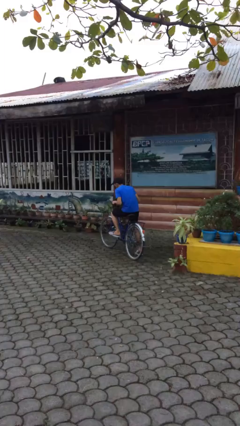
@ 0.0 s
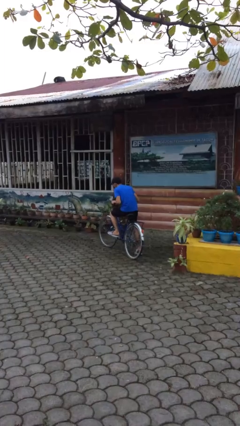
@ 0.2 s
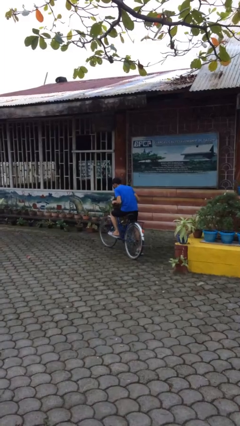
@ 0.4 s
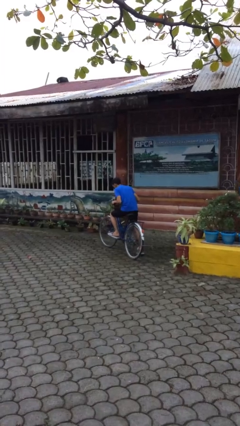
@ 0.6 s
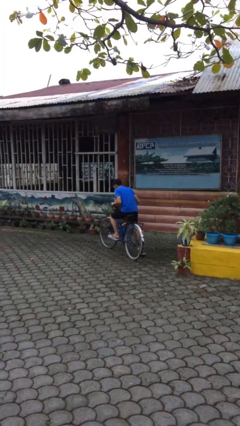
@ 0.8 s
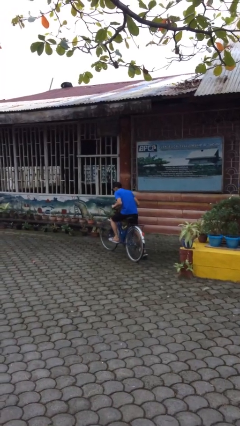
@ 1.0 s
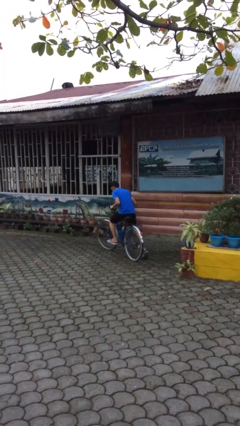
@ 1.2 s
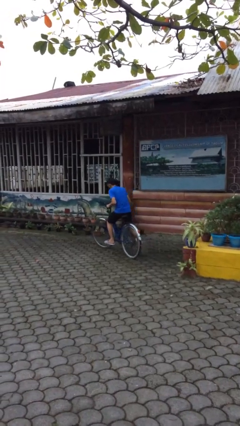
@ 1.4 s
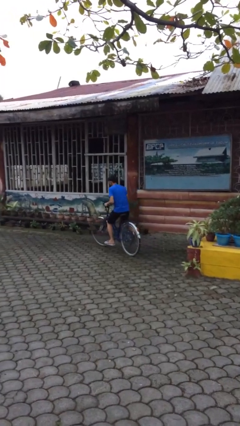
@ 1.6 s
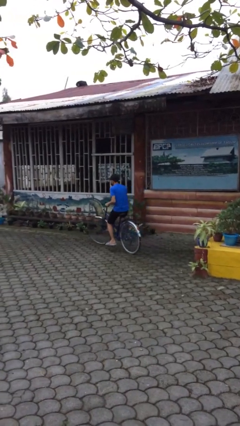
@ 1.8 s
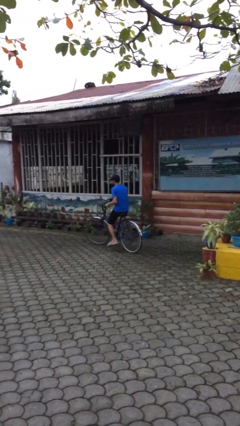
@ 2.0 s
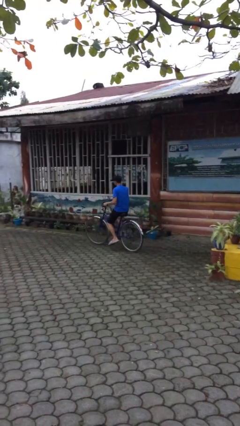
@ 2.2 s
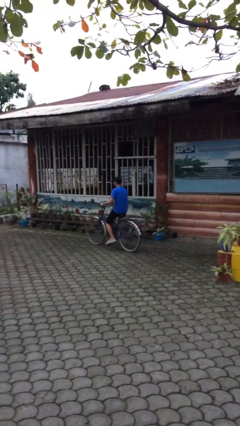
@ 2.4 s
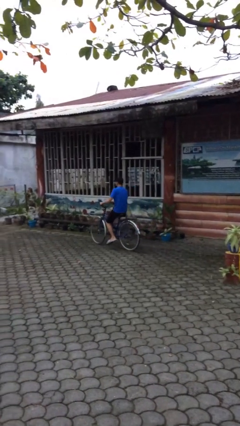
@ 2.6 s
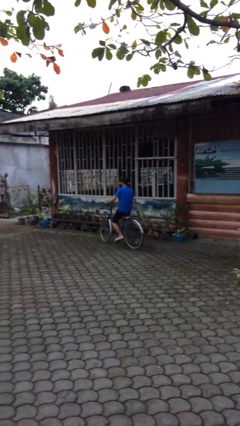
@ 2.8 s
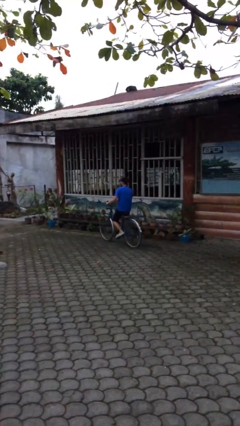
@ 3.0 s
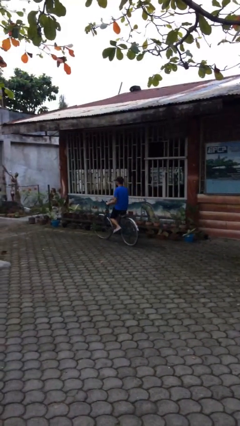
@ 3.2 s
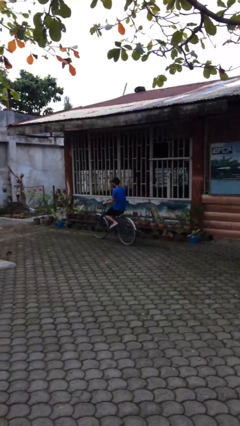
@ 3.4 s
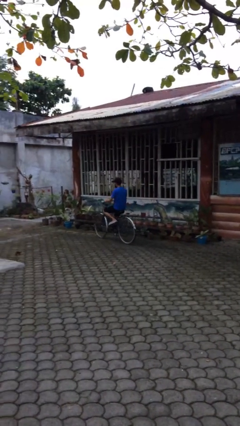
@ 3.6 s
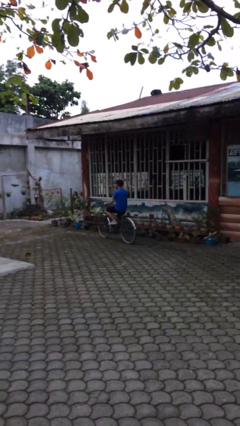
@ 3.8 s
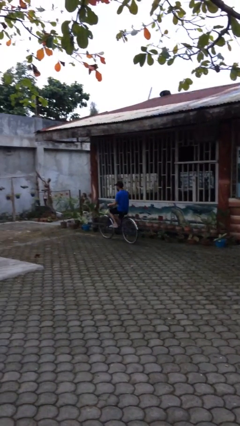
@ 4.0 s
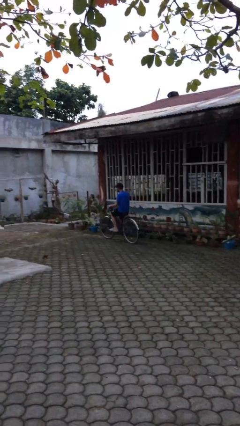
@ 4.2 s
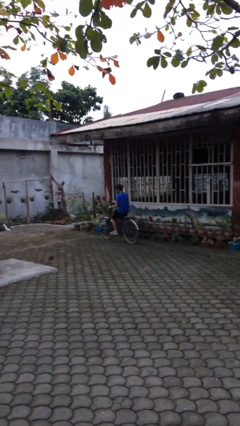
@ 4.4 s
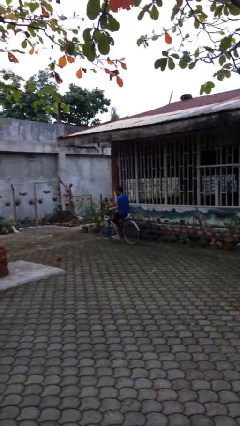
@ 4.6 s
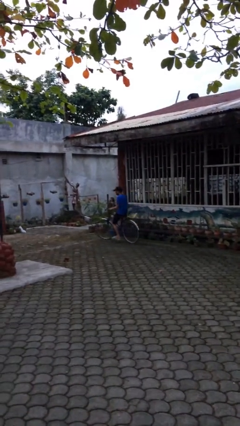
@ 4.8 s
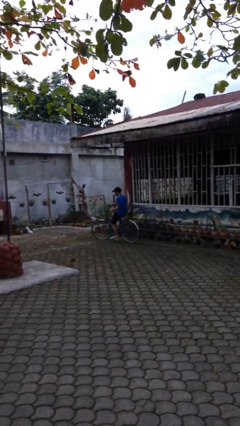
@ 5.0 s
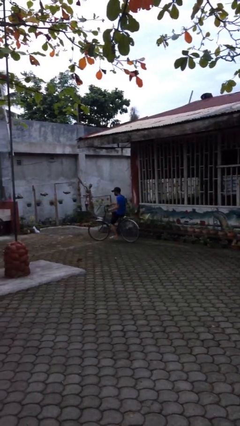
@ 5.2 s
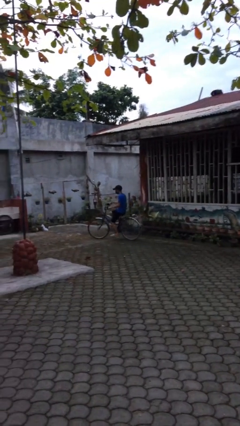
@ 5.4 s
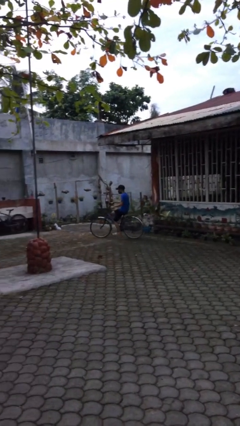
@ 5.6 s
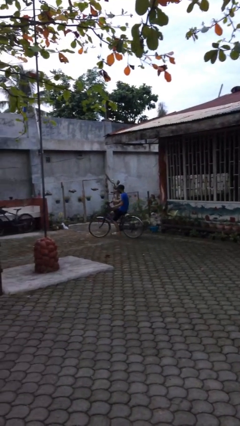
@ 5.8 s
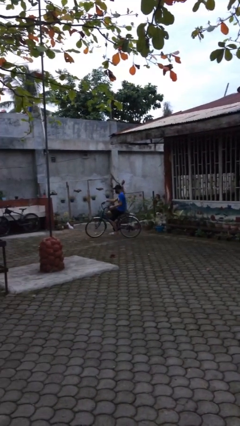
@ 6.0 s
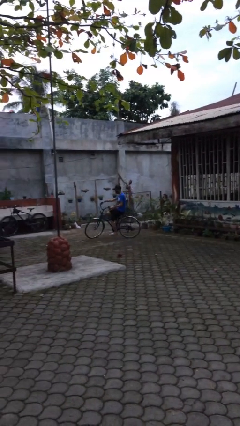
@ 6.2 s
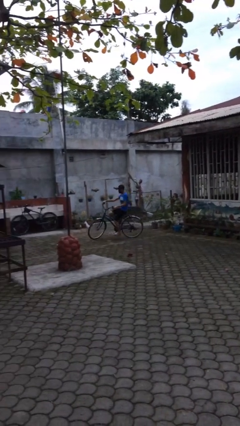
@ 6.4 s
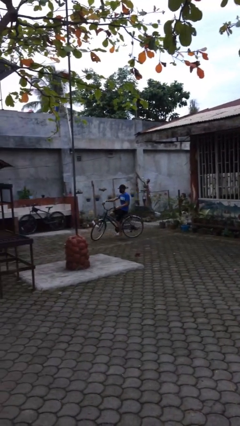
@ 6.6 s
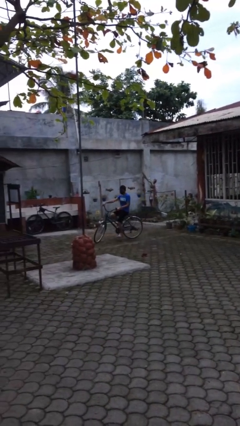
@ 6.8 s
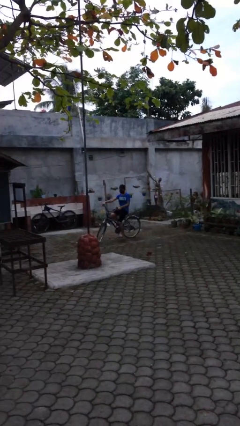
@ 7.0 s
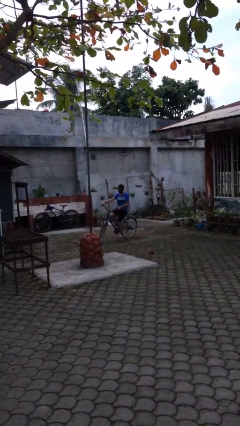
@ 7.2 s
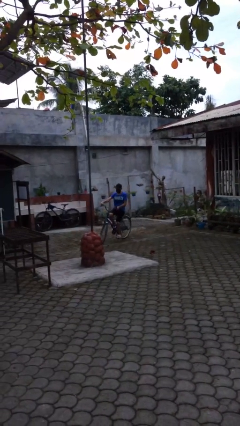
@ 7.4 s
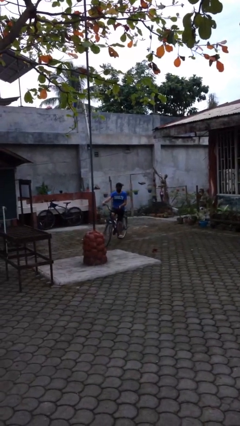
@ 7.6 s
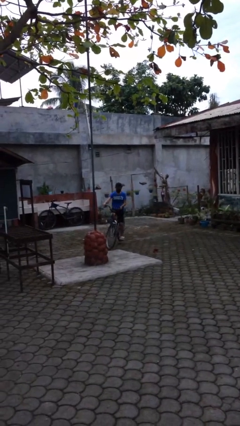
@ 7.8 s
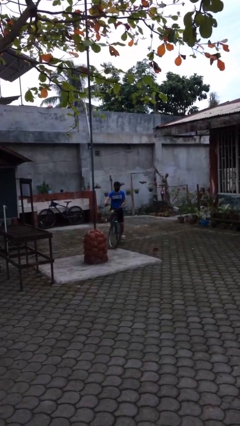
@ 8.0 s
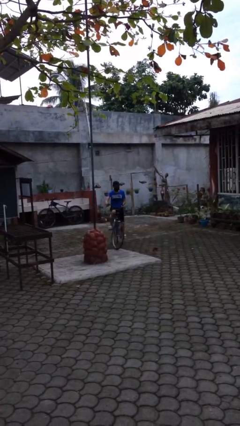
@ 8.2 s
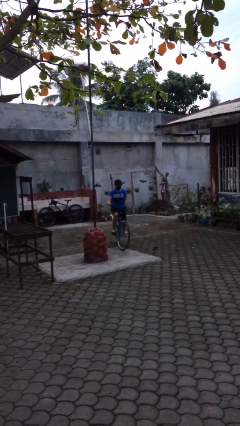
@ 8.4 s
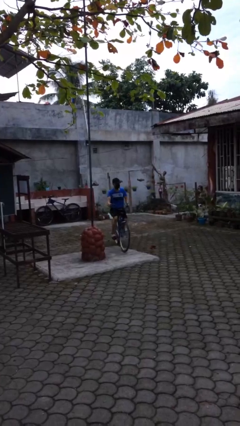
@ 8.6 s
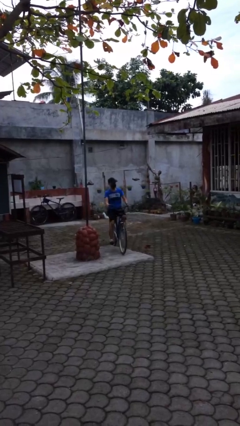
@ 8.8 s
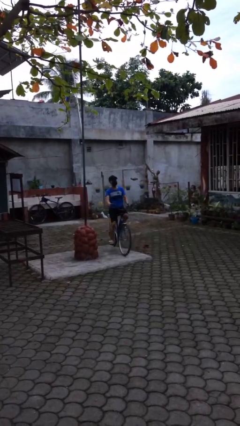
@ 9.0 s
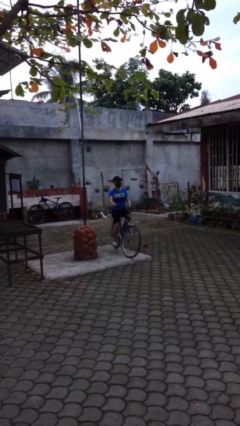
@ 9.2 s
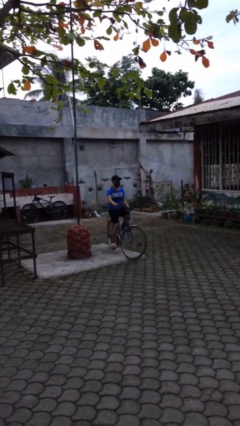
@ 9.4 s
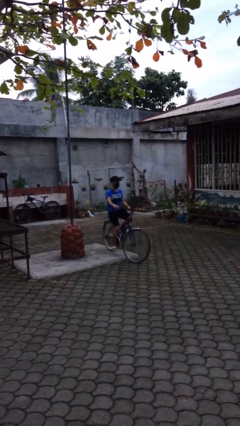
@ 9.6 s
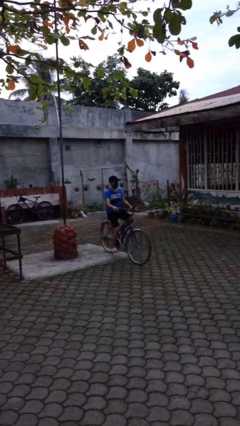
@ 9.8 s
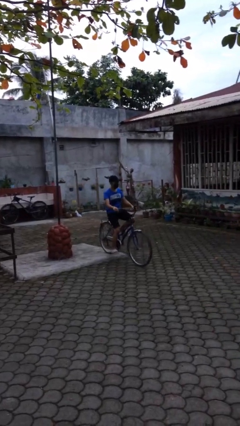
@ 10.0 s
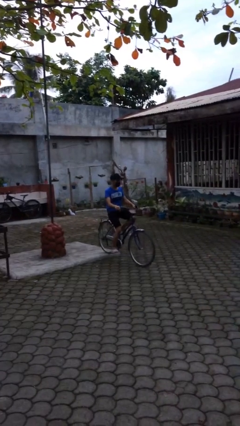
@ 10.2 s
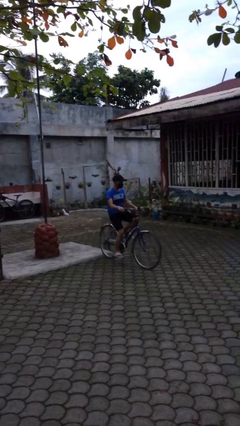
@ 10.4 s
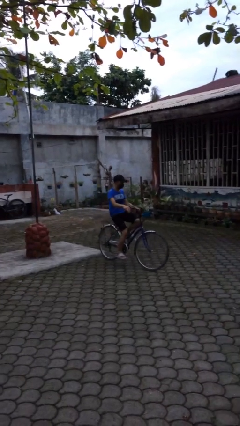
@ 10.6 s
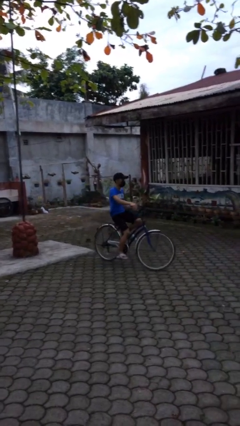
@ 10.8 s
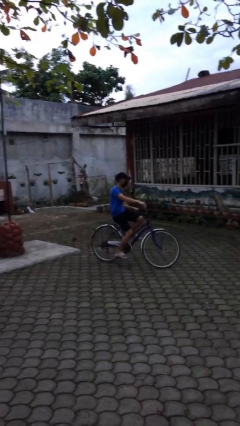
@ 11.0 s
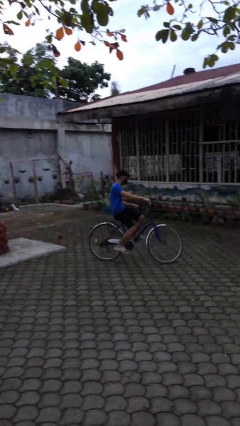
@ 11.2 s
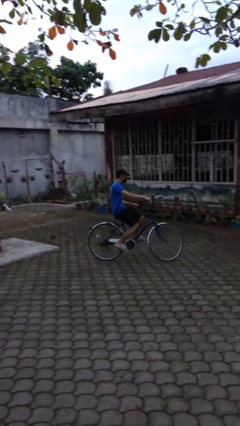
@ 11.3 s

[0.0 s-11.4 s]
person rides bicycle

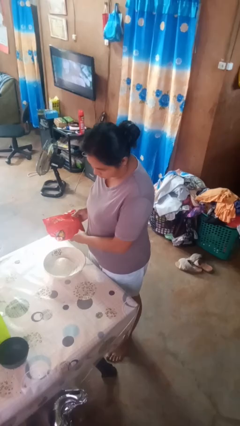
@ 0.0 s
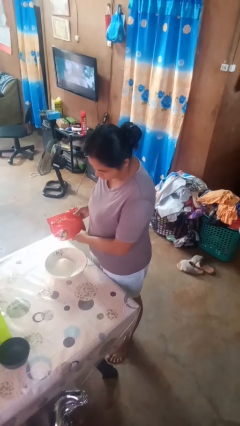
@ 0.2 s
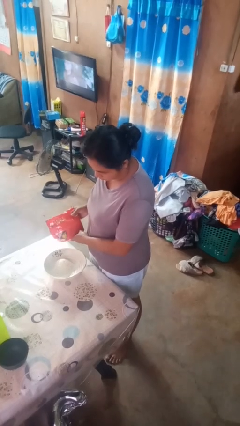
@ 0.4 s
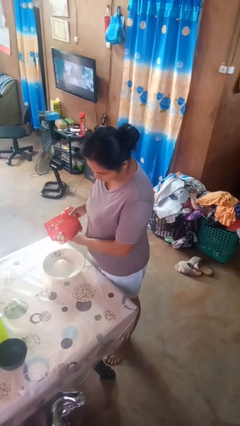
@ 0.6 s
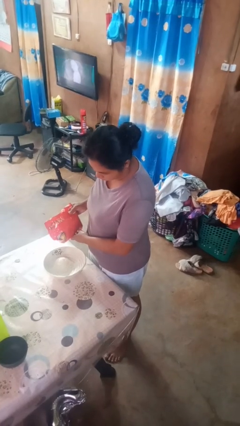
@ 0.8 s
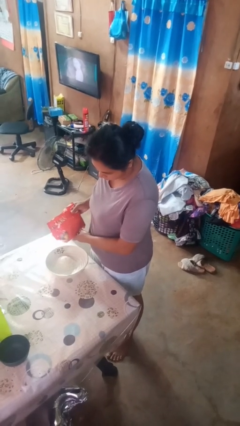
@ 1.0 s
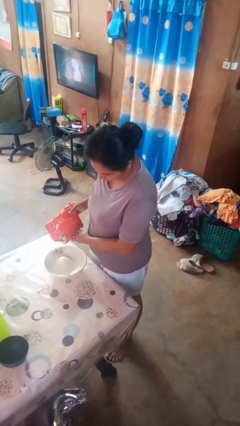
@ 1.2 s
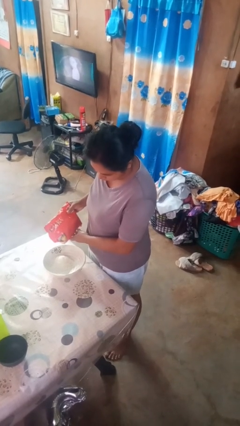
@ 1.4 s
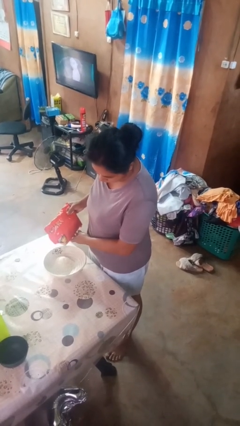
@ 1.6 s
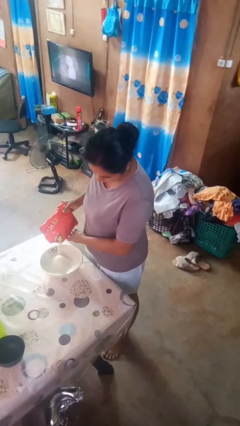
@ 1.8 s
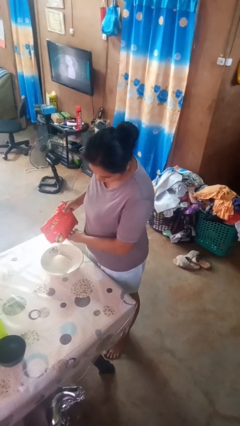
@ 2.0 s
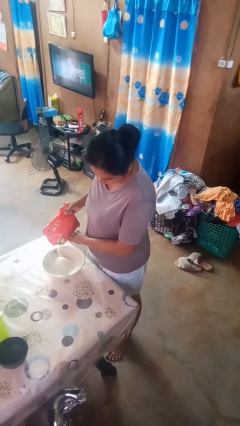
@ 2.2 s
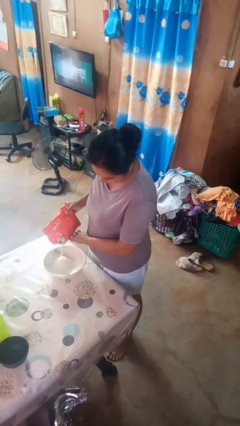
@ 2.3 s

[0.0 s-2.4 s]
person pours into bowl

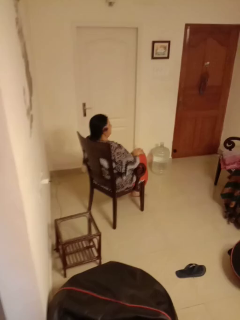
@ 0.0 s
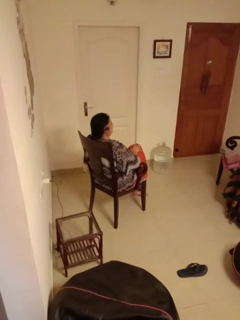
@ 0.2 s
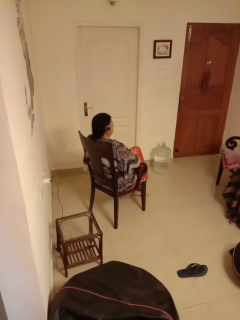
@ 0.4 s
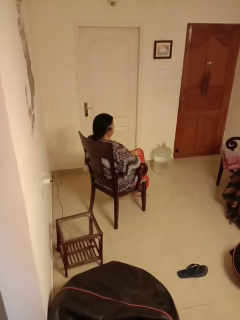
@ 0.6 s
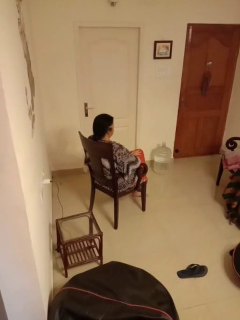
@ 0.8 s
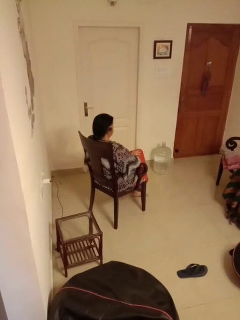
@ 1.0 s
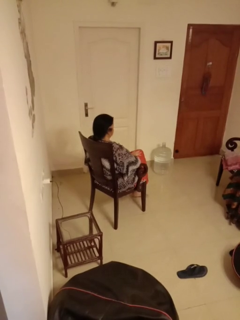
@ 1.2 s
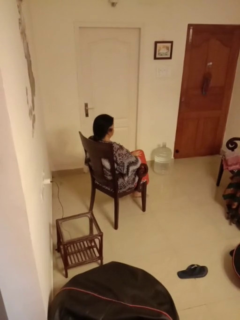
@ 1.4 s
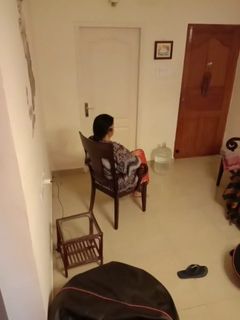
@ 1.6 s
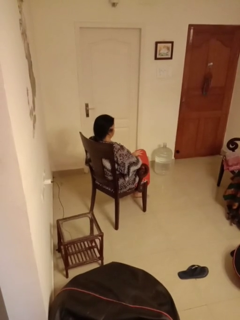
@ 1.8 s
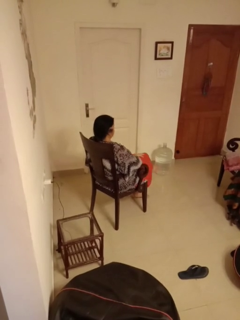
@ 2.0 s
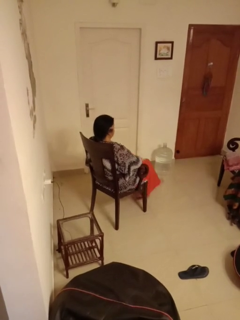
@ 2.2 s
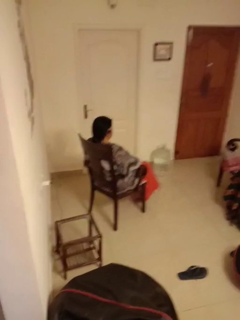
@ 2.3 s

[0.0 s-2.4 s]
person crosses legs

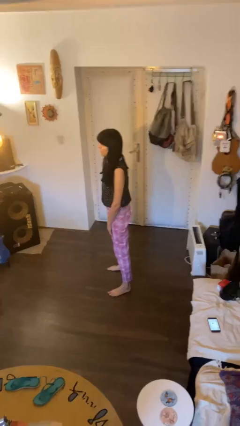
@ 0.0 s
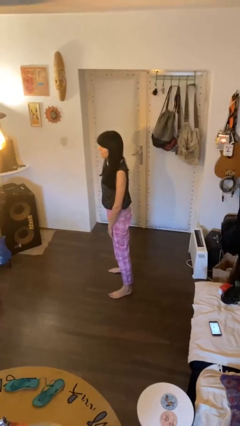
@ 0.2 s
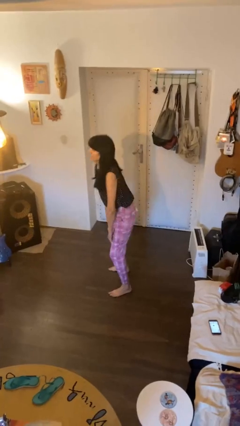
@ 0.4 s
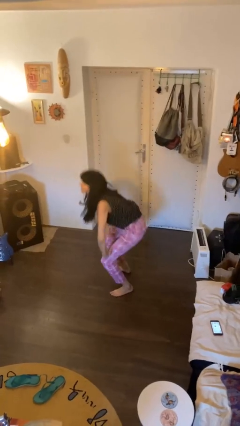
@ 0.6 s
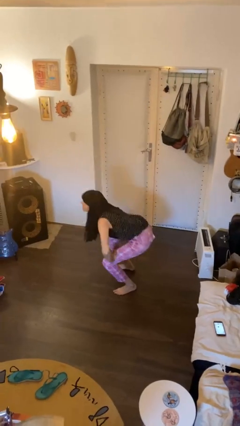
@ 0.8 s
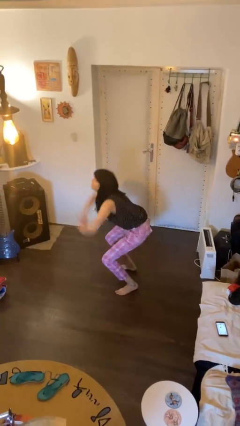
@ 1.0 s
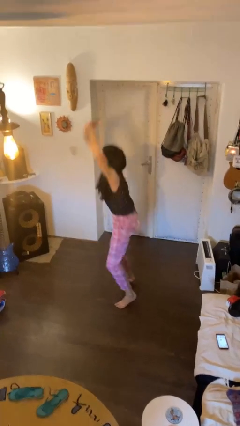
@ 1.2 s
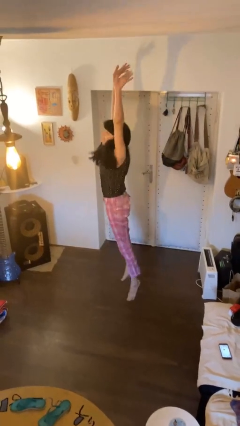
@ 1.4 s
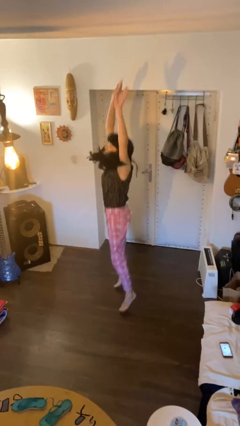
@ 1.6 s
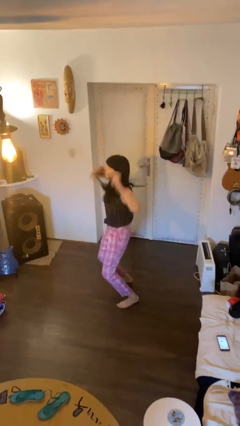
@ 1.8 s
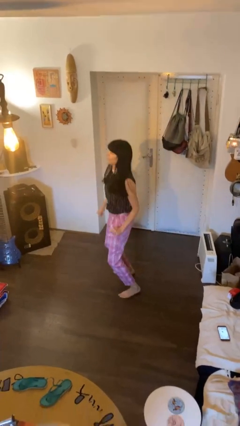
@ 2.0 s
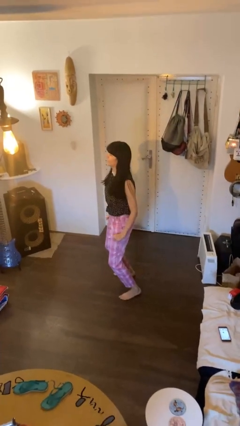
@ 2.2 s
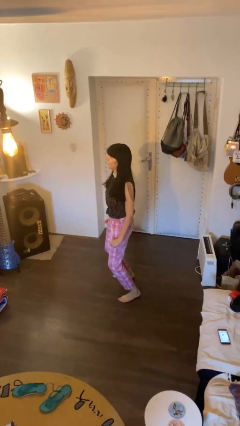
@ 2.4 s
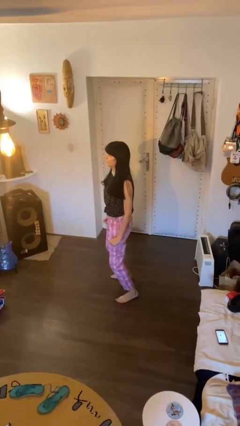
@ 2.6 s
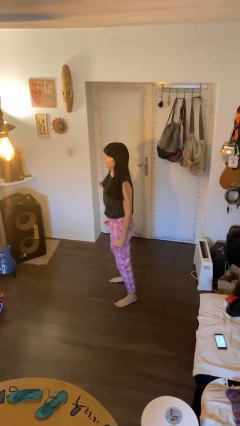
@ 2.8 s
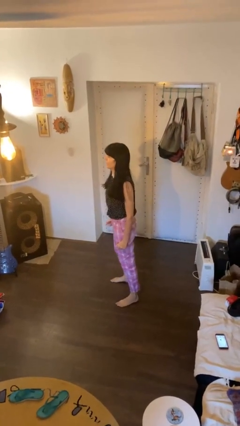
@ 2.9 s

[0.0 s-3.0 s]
person jumps
